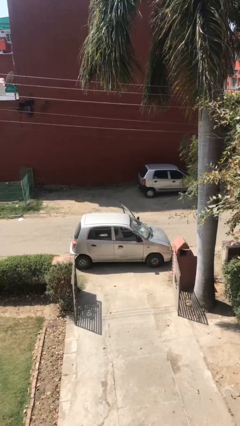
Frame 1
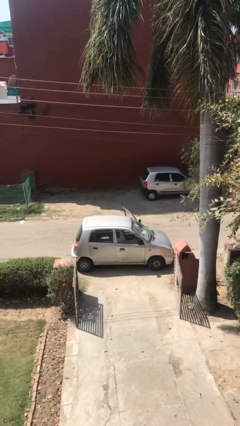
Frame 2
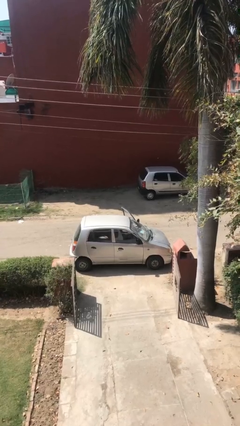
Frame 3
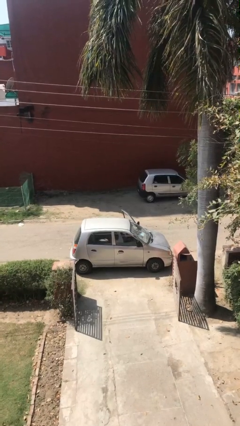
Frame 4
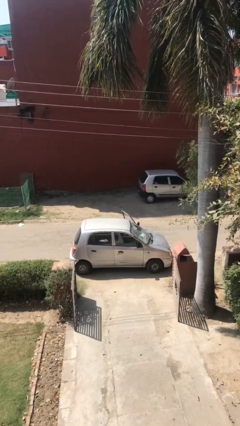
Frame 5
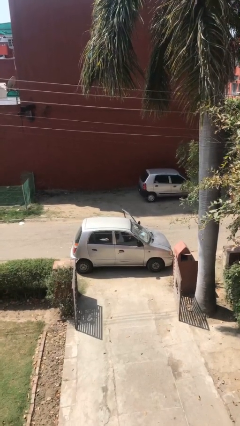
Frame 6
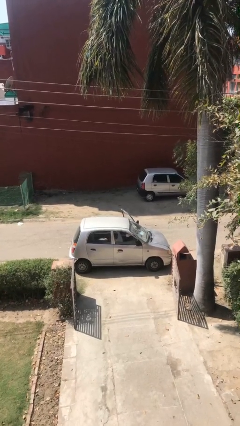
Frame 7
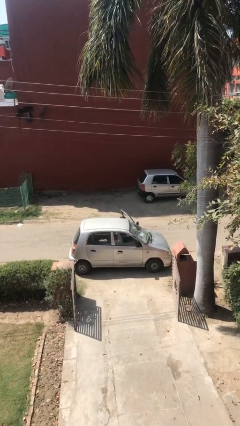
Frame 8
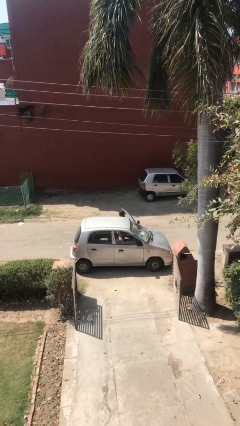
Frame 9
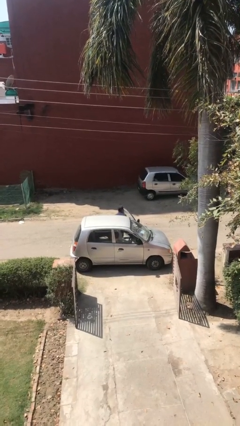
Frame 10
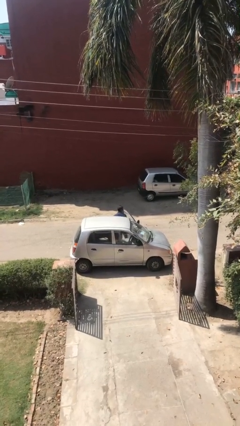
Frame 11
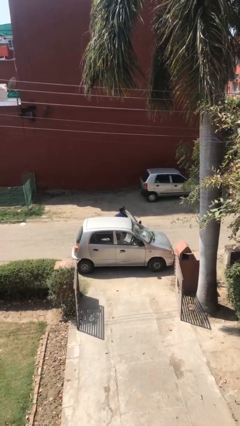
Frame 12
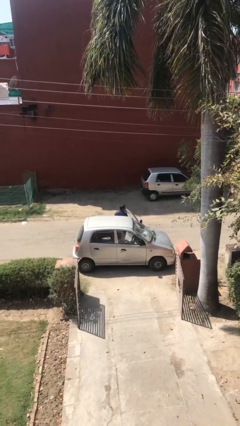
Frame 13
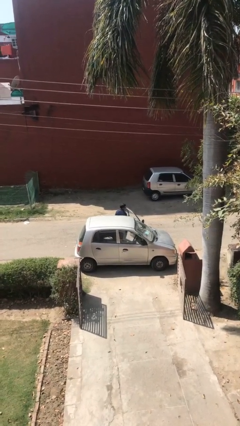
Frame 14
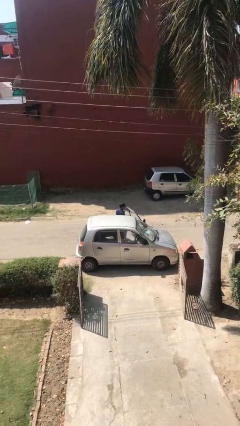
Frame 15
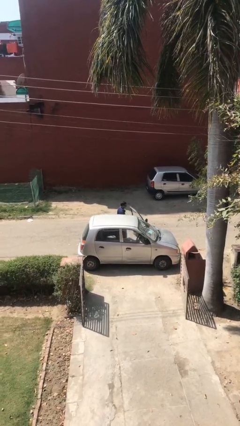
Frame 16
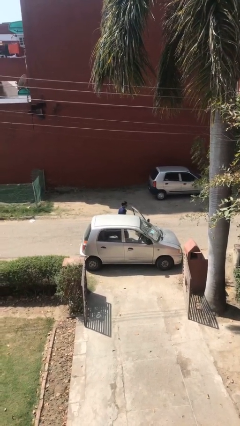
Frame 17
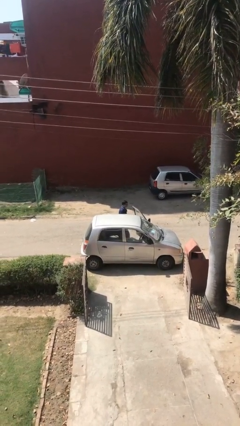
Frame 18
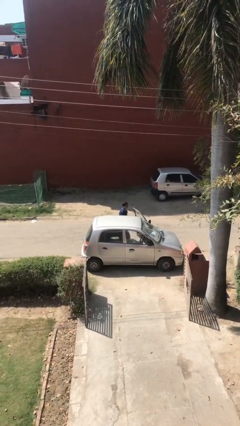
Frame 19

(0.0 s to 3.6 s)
person exits car

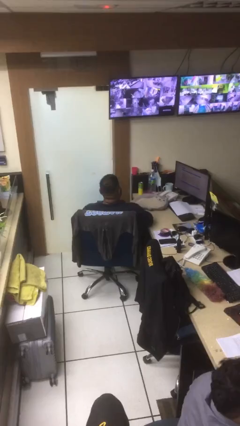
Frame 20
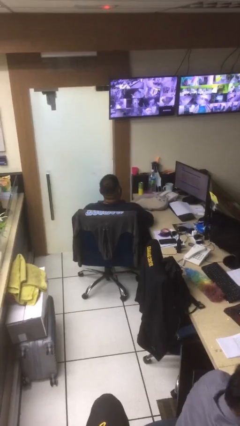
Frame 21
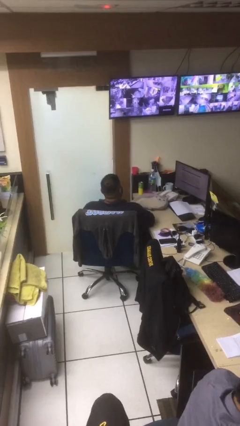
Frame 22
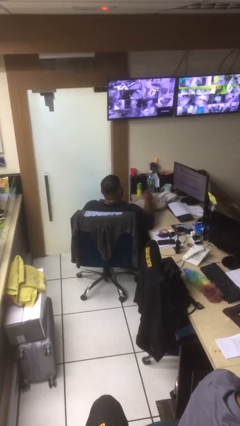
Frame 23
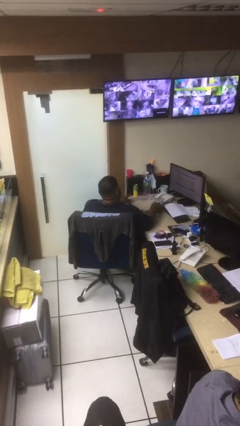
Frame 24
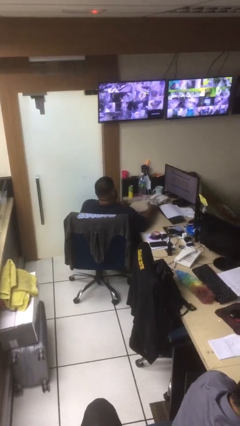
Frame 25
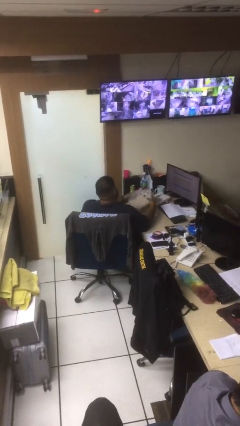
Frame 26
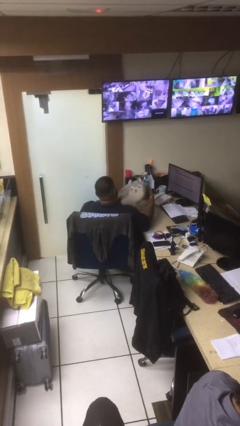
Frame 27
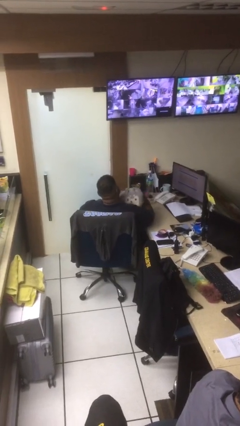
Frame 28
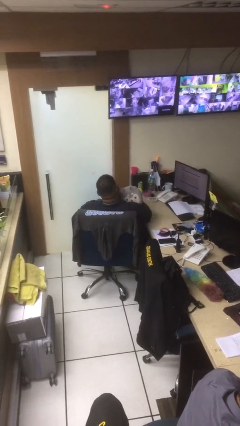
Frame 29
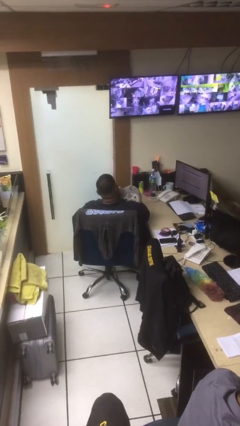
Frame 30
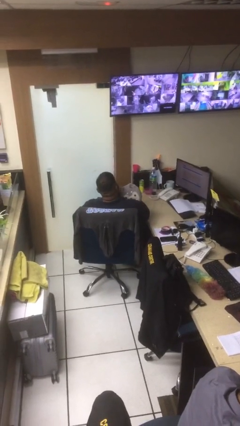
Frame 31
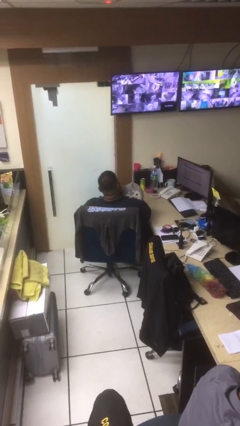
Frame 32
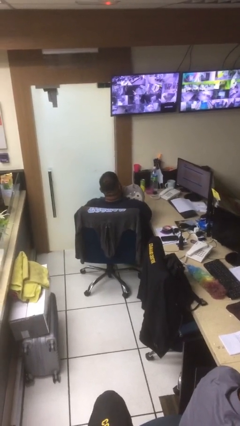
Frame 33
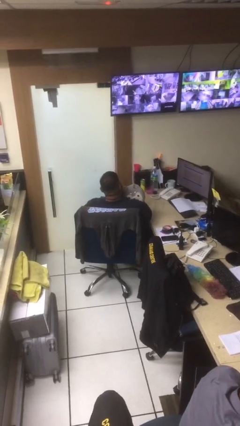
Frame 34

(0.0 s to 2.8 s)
person hugs stuffed animal

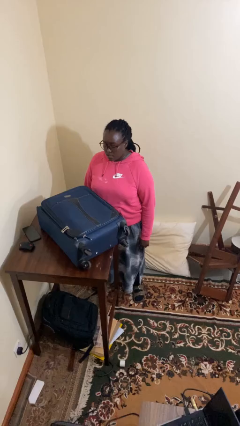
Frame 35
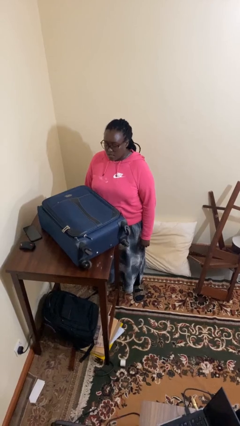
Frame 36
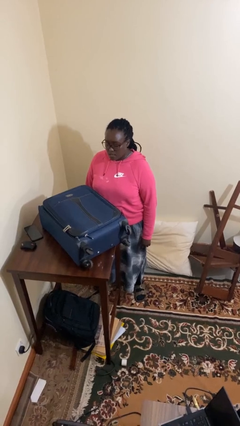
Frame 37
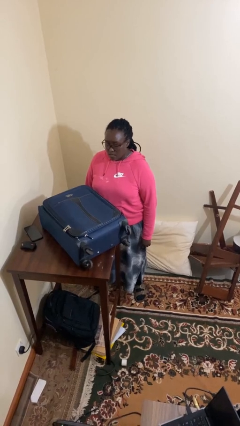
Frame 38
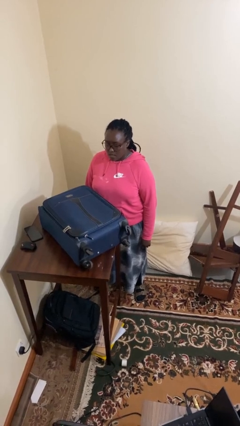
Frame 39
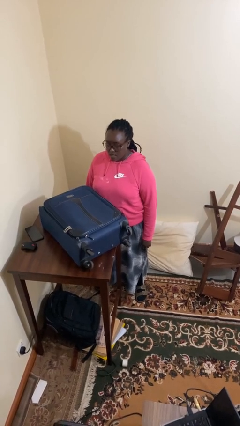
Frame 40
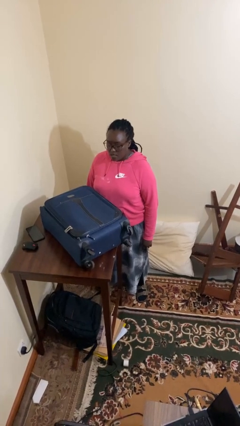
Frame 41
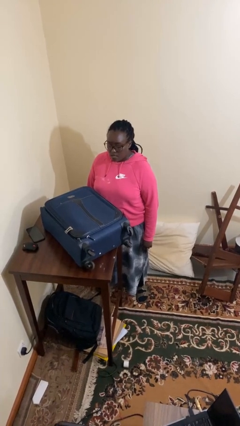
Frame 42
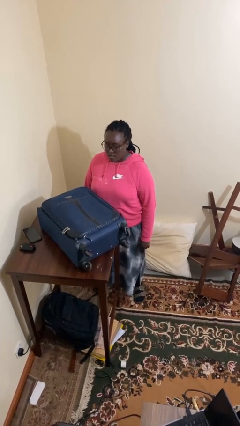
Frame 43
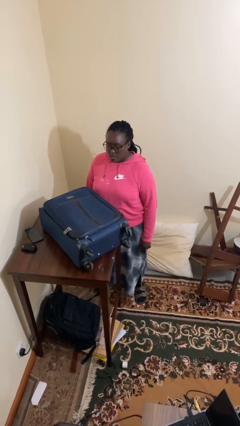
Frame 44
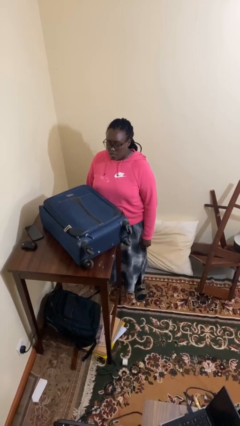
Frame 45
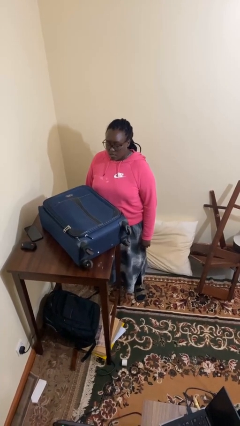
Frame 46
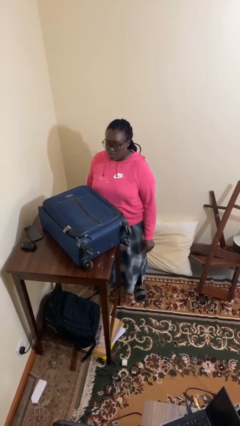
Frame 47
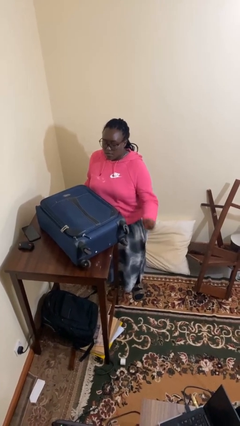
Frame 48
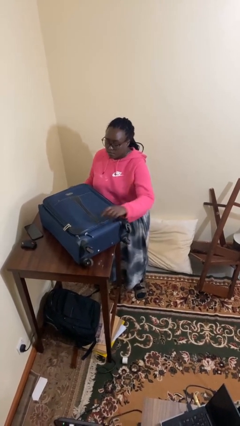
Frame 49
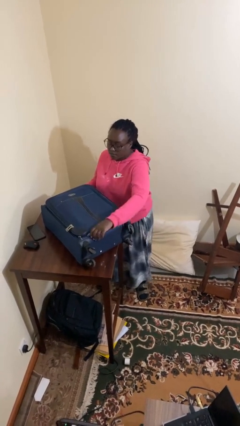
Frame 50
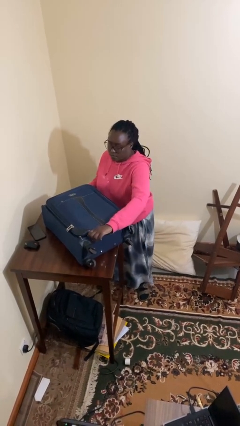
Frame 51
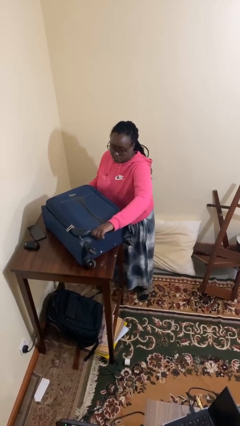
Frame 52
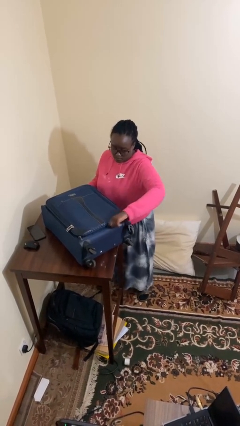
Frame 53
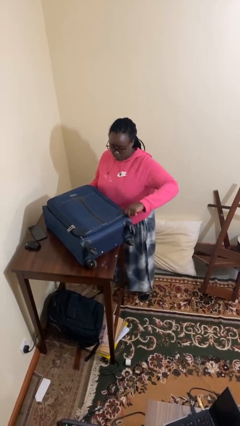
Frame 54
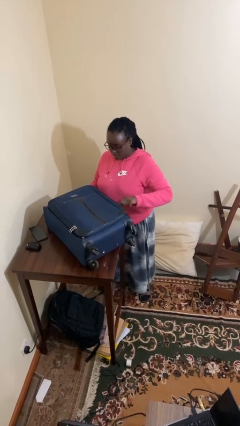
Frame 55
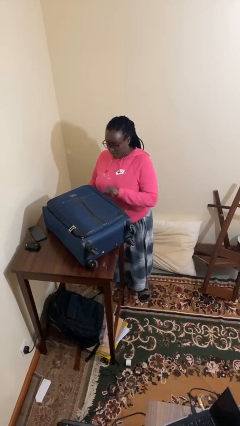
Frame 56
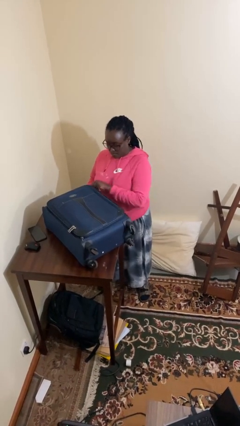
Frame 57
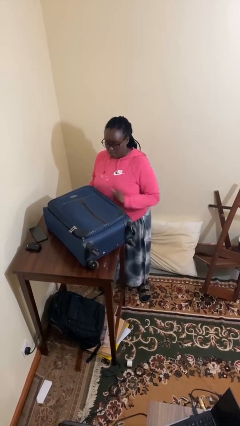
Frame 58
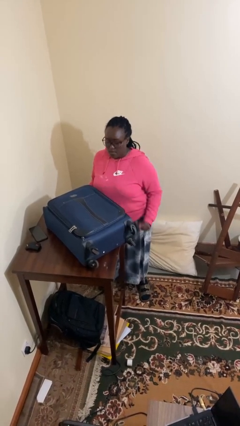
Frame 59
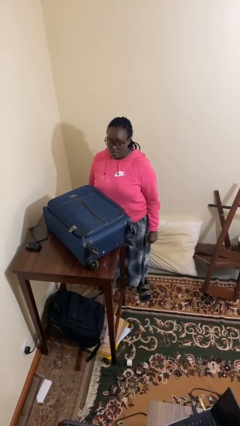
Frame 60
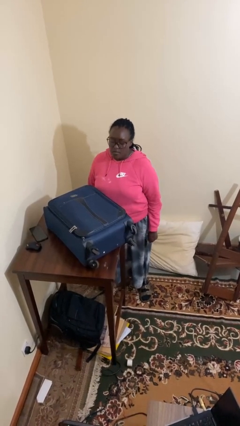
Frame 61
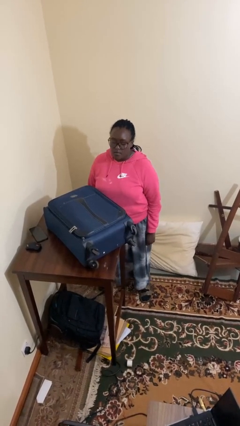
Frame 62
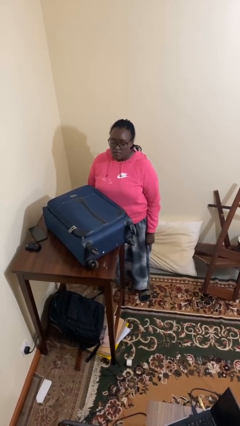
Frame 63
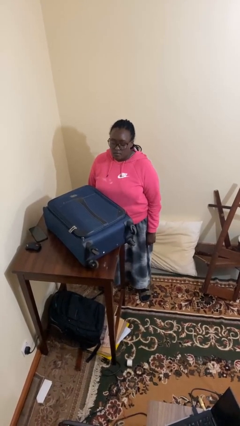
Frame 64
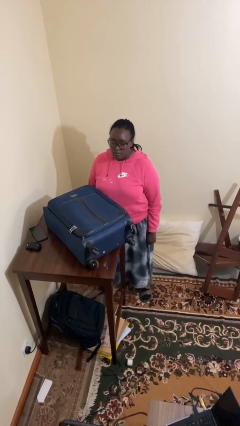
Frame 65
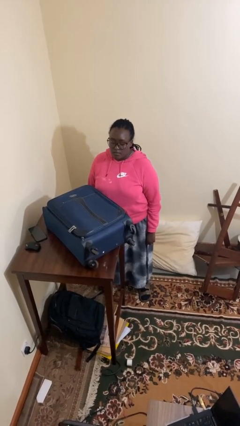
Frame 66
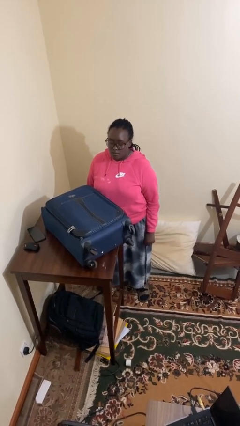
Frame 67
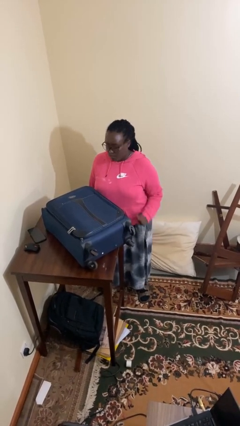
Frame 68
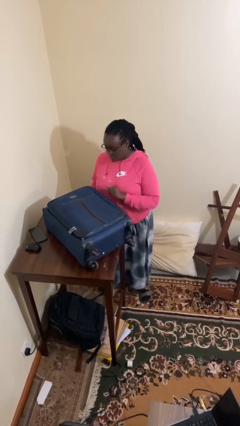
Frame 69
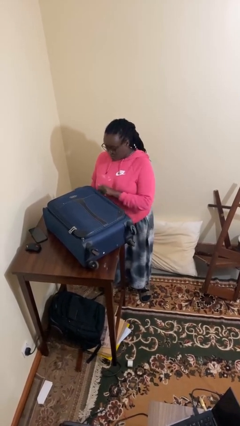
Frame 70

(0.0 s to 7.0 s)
person opens suitcase

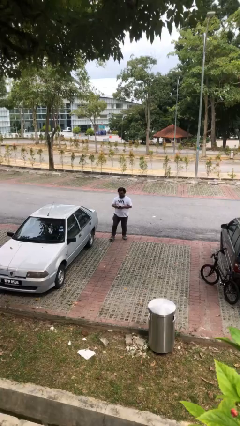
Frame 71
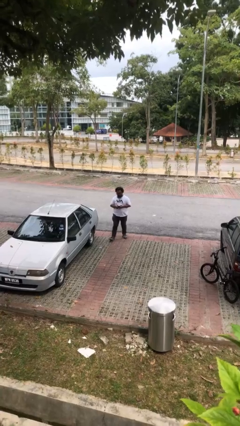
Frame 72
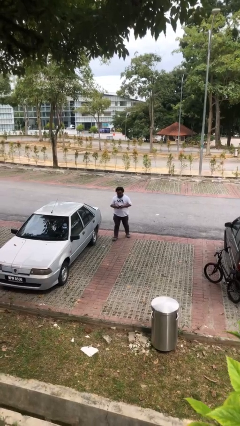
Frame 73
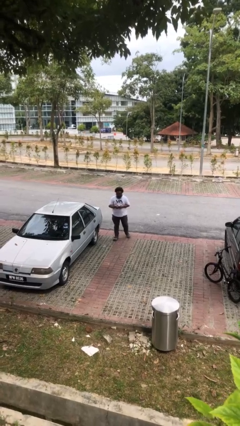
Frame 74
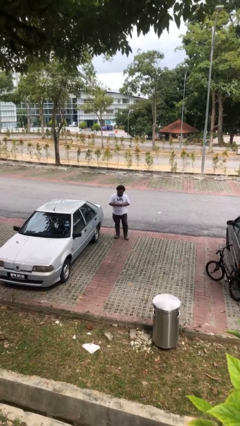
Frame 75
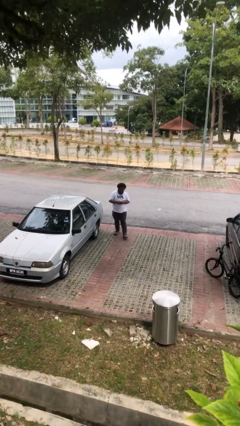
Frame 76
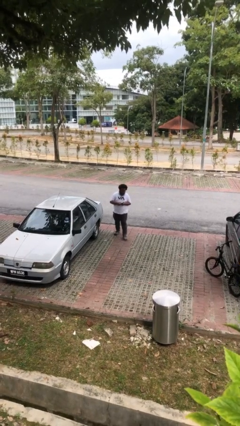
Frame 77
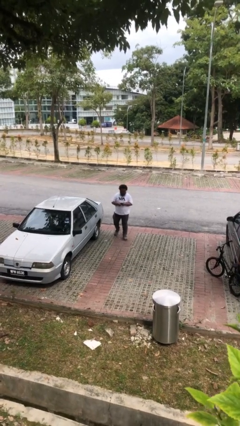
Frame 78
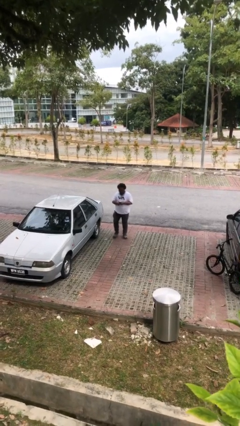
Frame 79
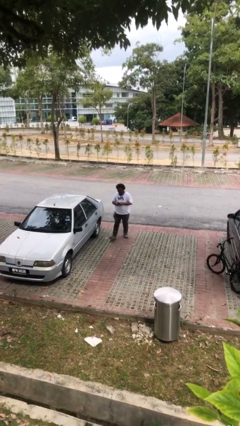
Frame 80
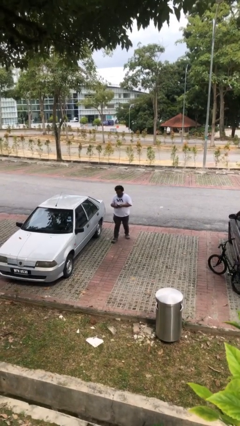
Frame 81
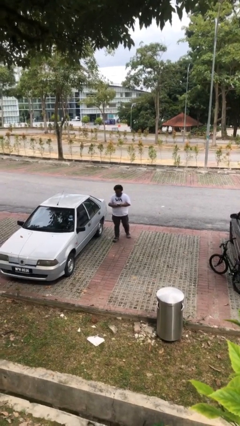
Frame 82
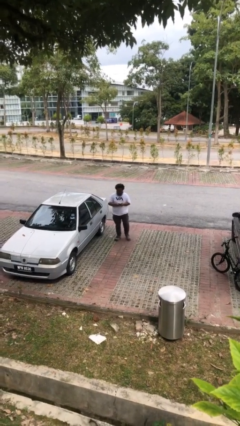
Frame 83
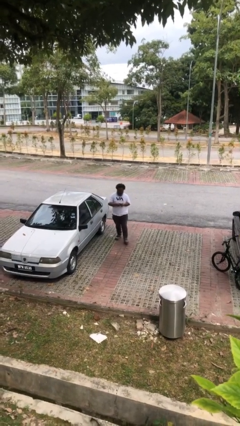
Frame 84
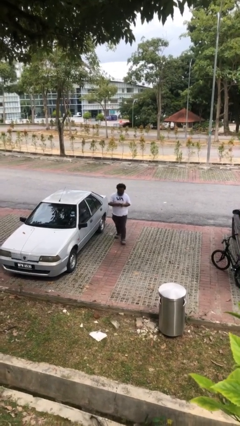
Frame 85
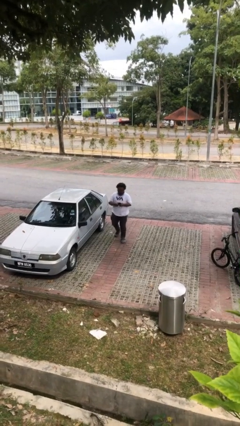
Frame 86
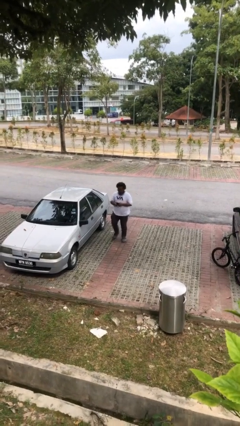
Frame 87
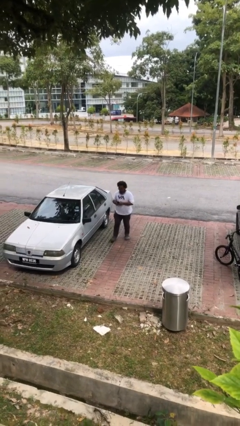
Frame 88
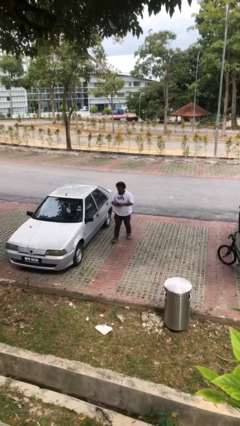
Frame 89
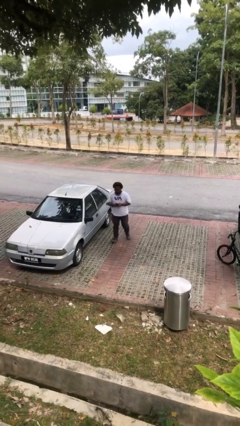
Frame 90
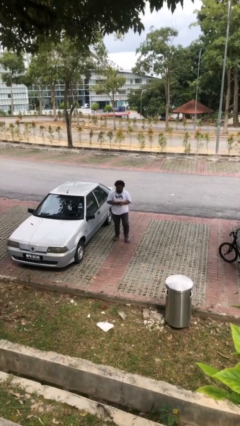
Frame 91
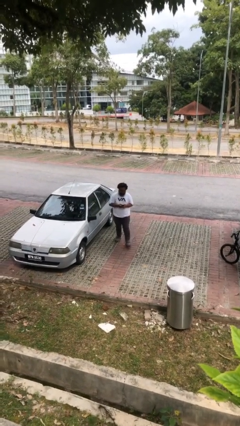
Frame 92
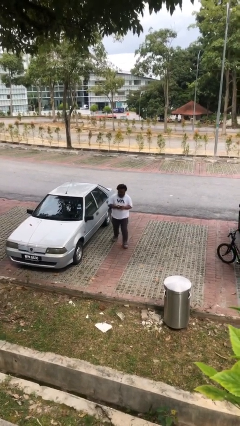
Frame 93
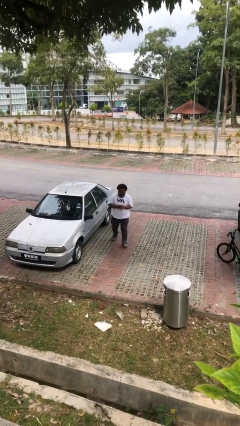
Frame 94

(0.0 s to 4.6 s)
person texts on phone
